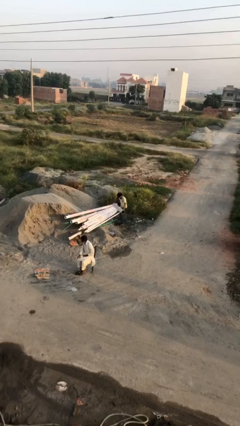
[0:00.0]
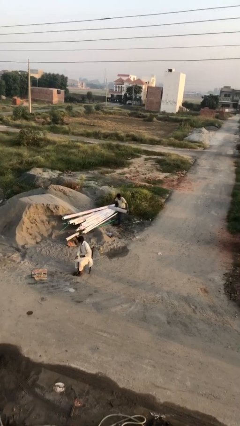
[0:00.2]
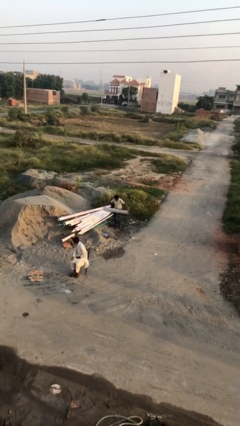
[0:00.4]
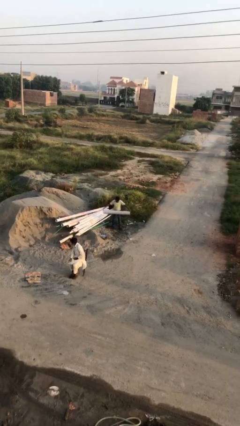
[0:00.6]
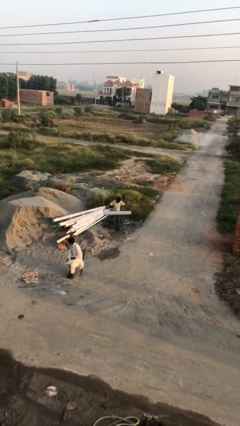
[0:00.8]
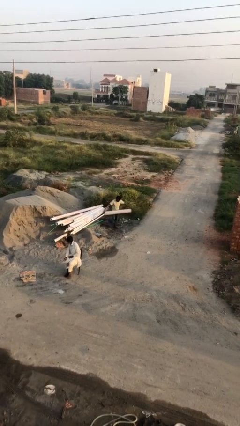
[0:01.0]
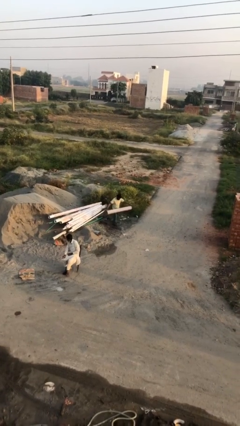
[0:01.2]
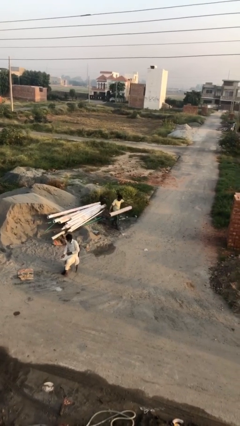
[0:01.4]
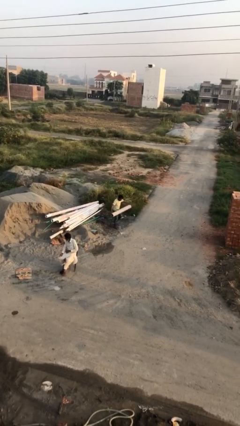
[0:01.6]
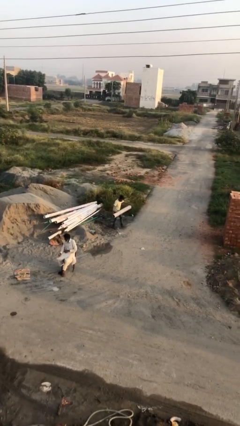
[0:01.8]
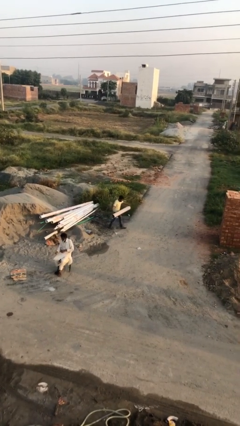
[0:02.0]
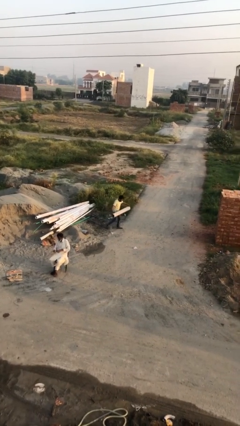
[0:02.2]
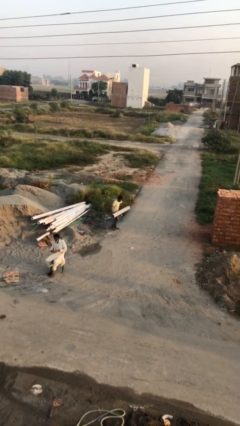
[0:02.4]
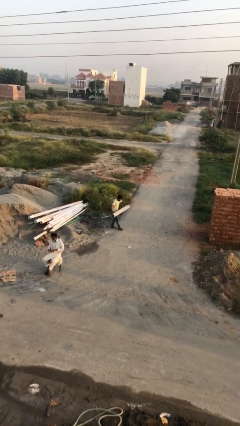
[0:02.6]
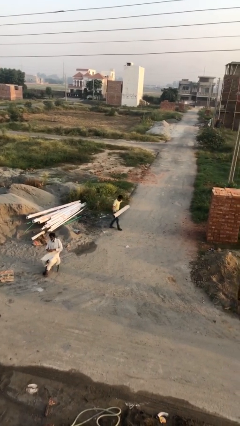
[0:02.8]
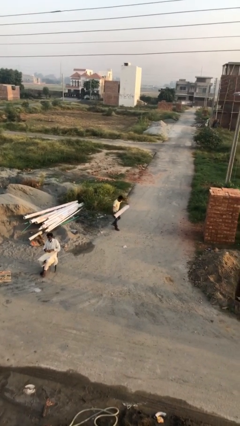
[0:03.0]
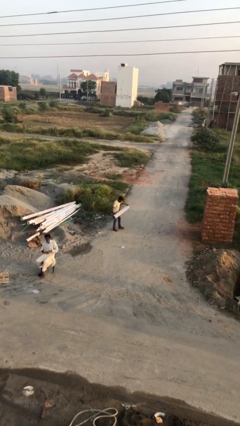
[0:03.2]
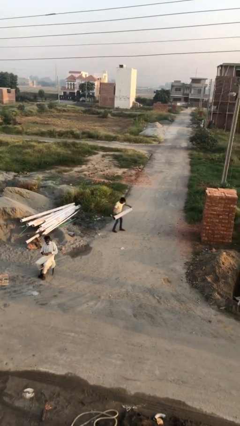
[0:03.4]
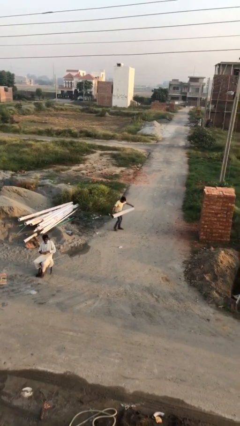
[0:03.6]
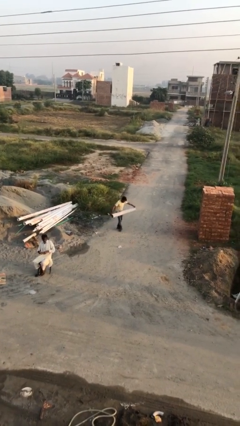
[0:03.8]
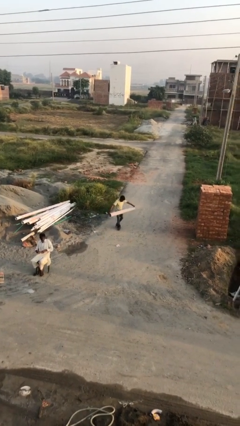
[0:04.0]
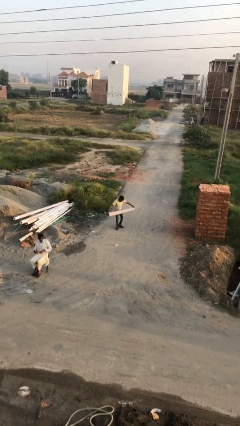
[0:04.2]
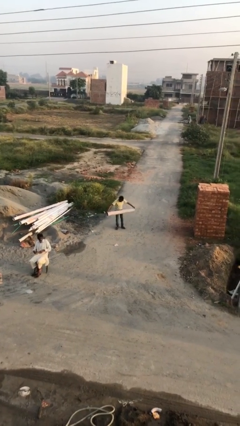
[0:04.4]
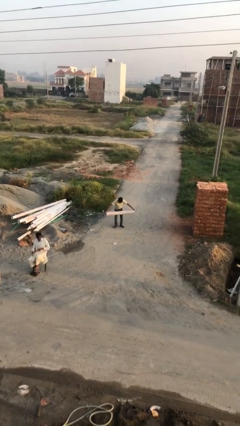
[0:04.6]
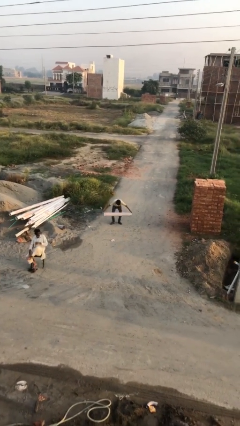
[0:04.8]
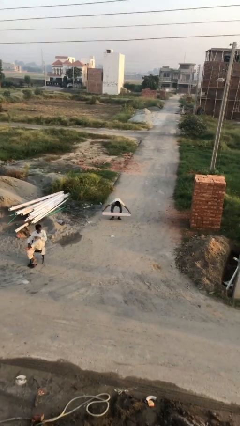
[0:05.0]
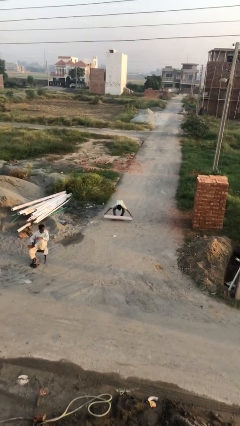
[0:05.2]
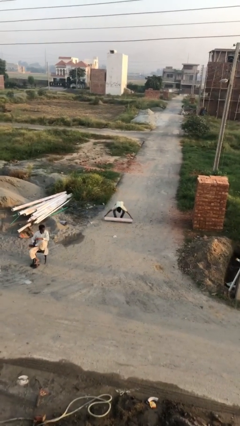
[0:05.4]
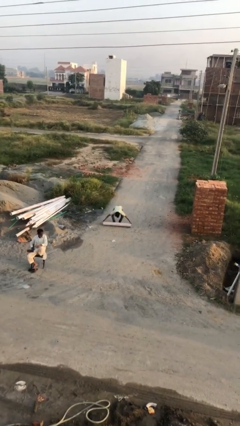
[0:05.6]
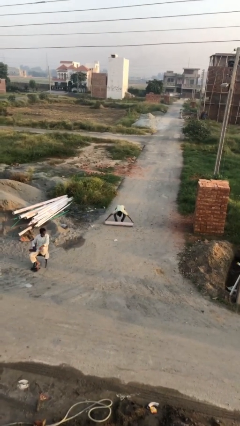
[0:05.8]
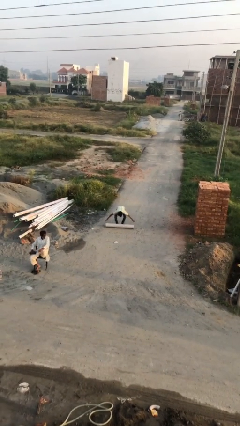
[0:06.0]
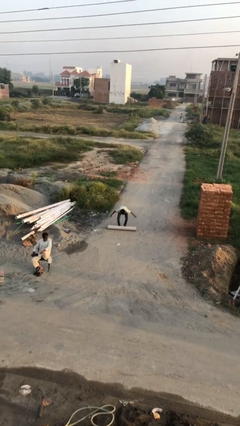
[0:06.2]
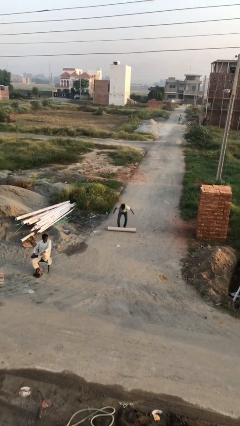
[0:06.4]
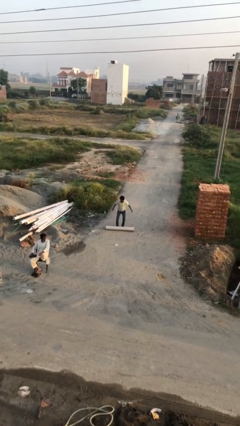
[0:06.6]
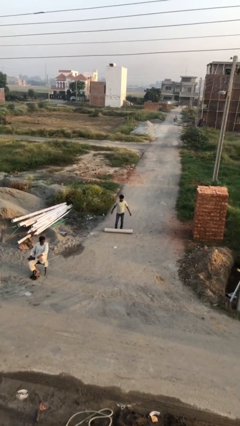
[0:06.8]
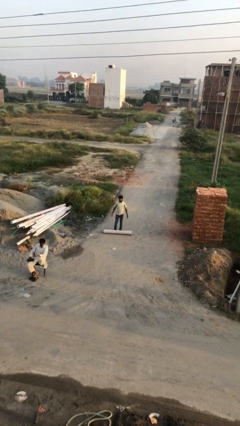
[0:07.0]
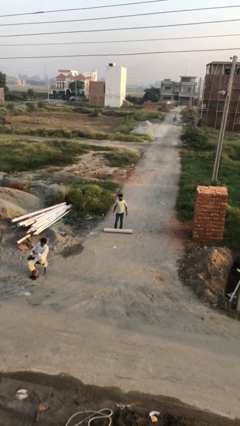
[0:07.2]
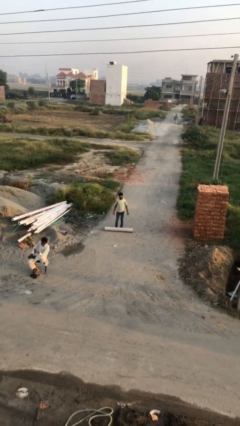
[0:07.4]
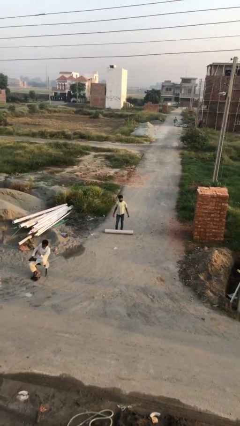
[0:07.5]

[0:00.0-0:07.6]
person carries heavy object

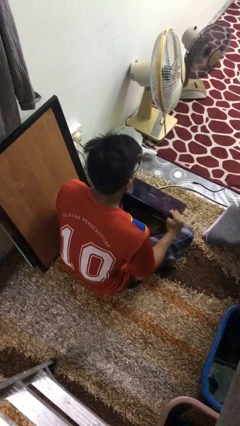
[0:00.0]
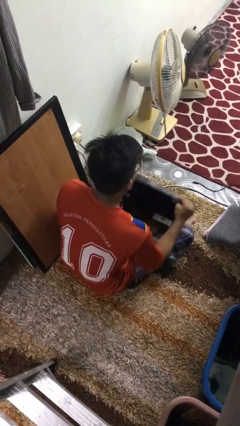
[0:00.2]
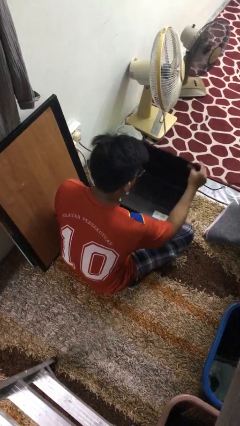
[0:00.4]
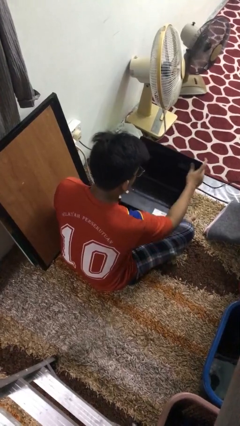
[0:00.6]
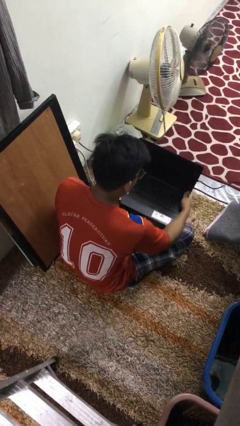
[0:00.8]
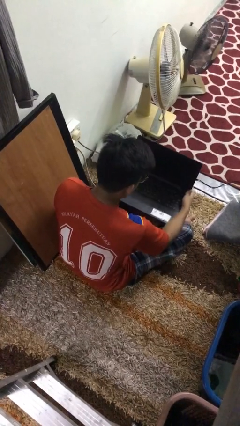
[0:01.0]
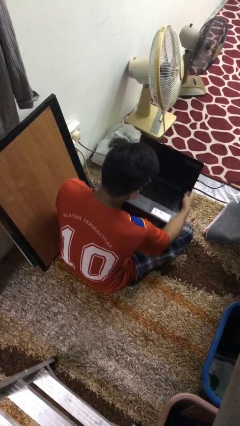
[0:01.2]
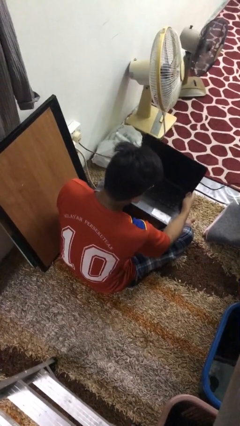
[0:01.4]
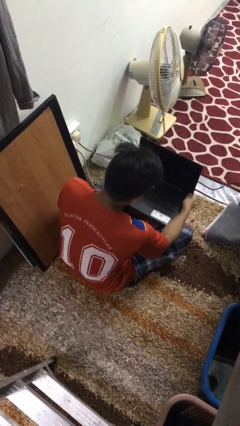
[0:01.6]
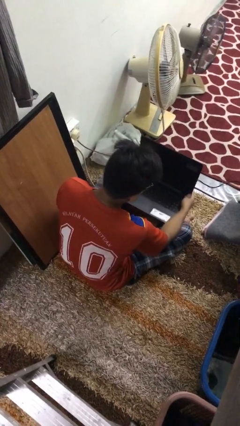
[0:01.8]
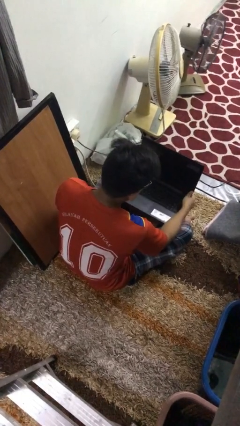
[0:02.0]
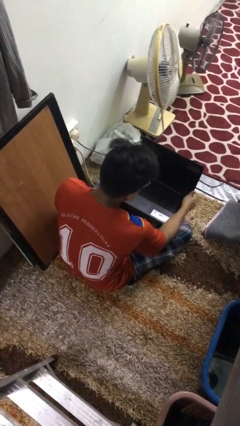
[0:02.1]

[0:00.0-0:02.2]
person opens laptop

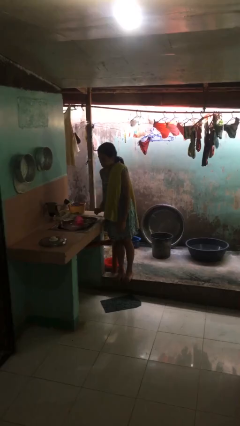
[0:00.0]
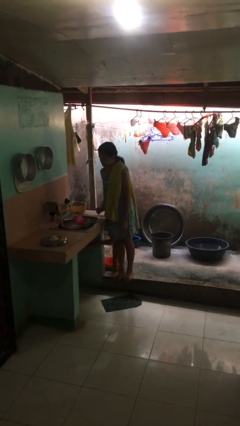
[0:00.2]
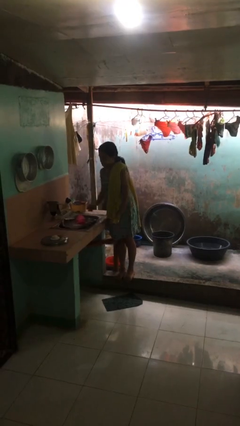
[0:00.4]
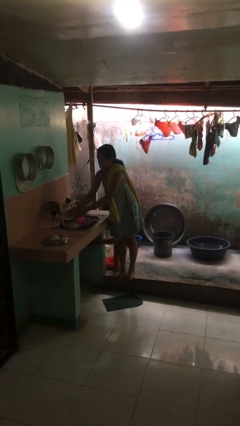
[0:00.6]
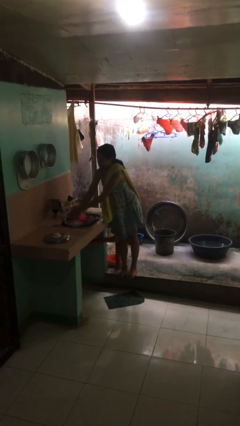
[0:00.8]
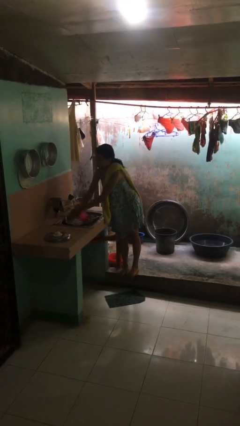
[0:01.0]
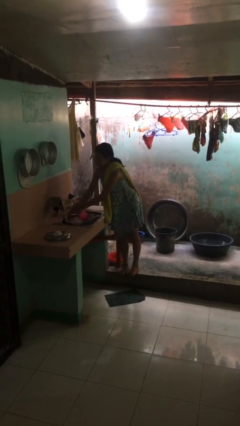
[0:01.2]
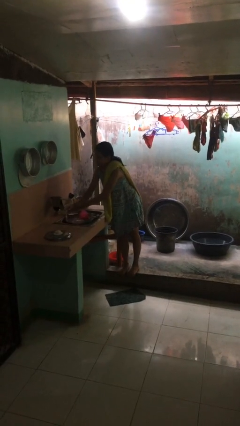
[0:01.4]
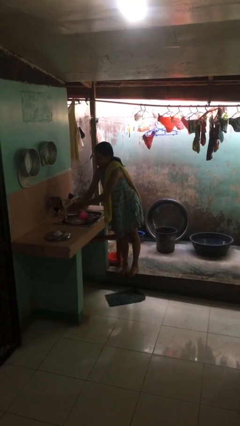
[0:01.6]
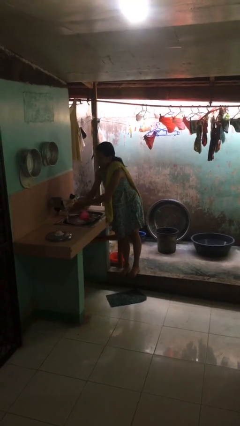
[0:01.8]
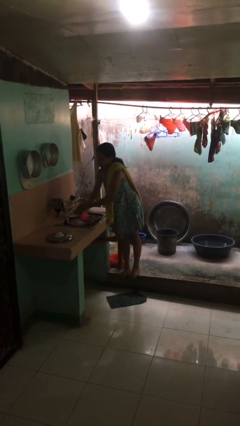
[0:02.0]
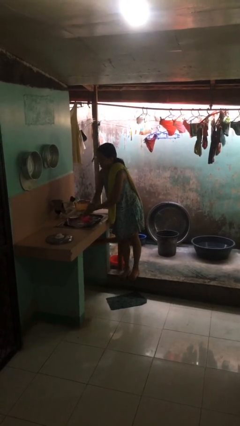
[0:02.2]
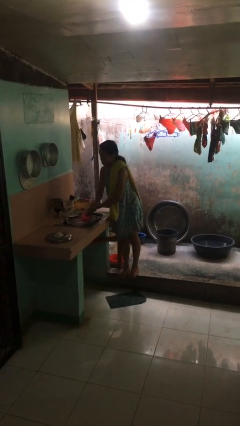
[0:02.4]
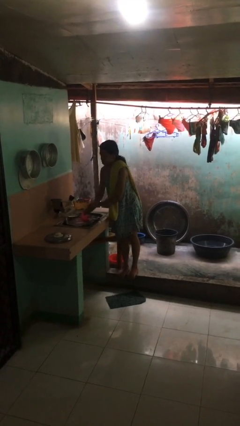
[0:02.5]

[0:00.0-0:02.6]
person washes hands

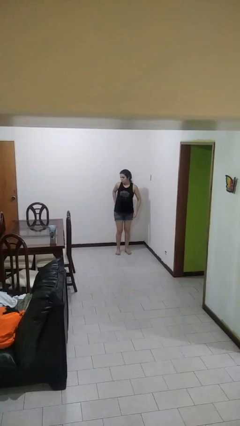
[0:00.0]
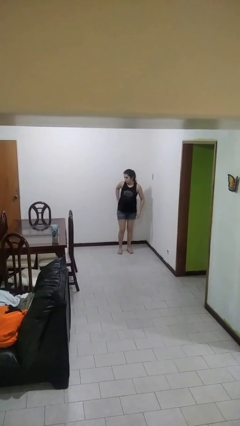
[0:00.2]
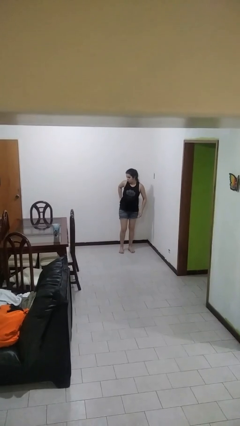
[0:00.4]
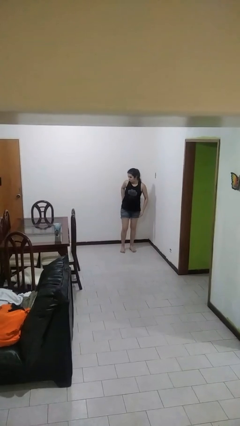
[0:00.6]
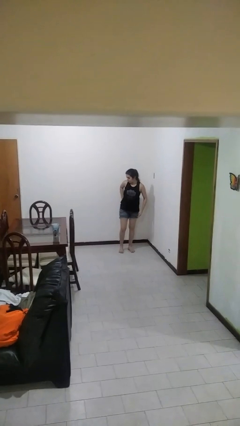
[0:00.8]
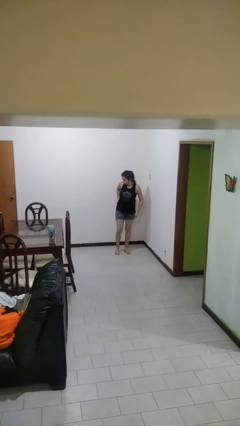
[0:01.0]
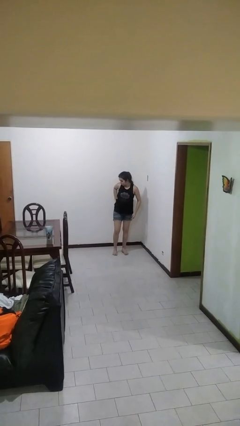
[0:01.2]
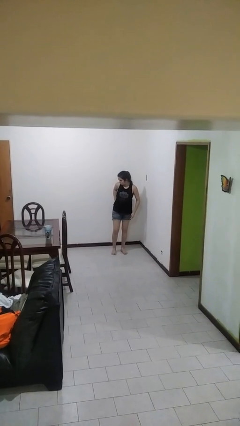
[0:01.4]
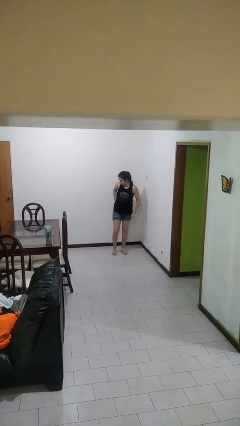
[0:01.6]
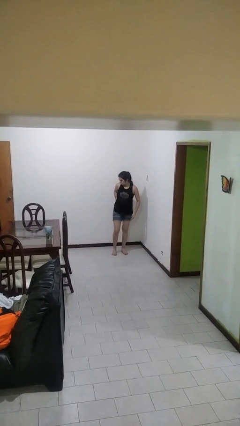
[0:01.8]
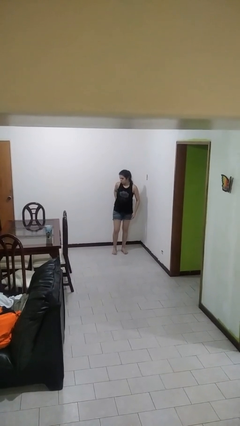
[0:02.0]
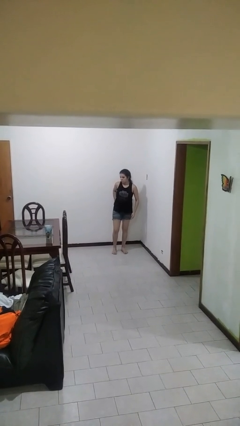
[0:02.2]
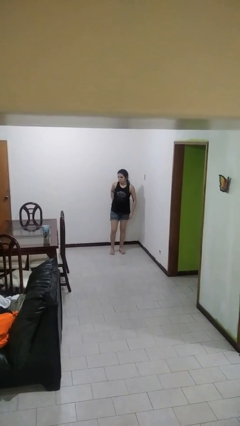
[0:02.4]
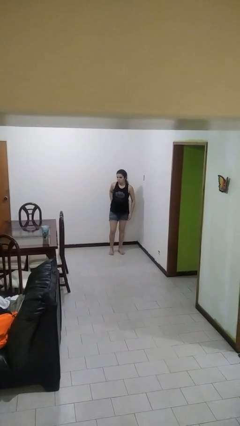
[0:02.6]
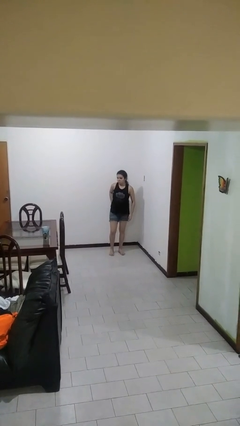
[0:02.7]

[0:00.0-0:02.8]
person puts phone into pocket

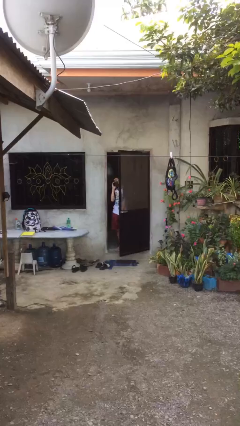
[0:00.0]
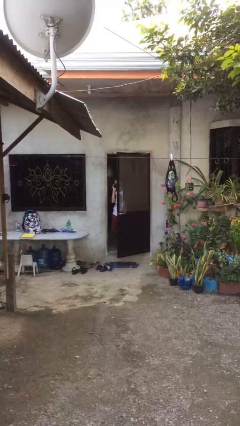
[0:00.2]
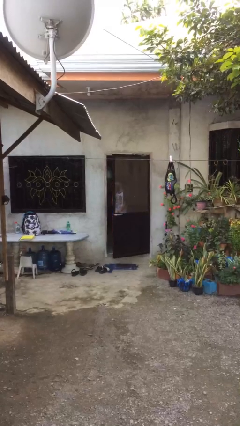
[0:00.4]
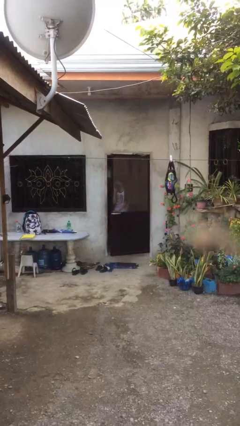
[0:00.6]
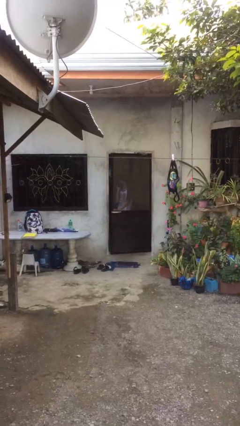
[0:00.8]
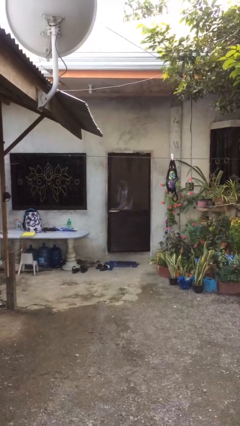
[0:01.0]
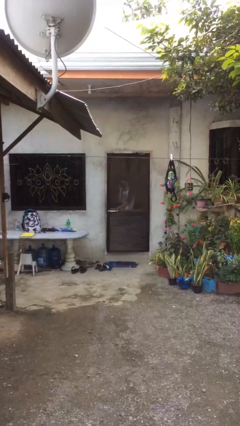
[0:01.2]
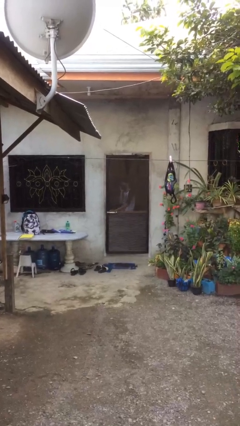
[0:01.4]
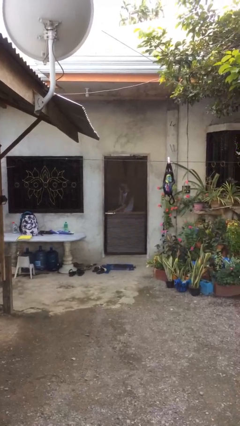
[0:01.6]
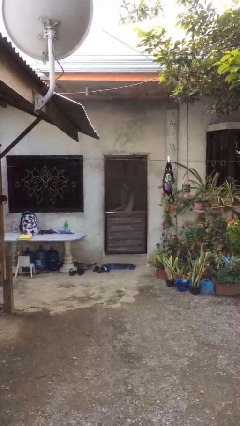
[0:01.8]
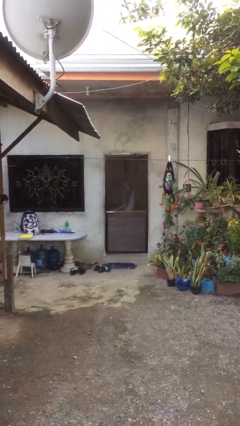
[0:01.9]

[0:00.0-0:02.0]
person closes facility door

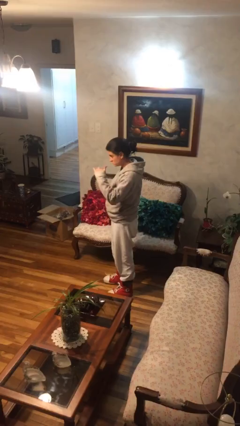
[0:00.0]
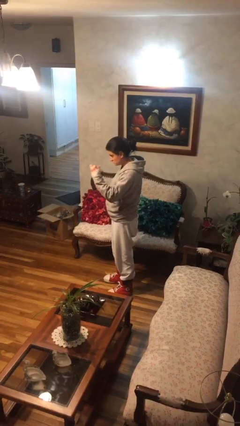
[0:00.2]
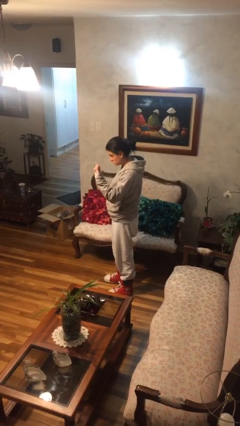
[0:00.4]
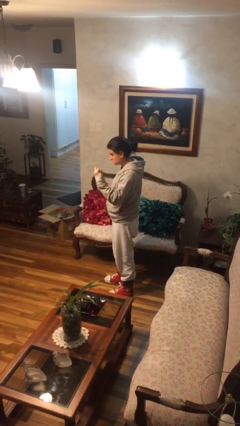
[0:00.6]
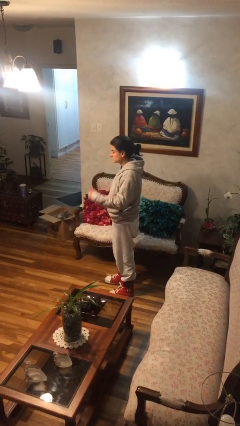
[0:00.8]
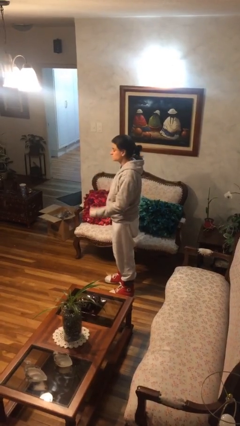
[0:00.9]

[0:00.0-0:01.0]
person gestures hang loose
